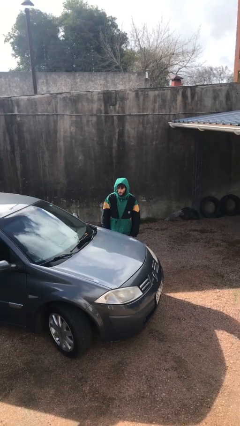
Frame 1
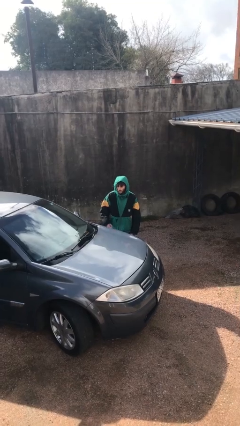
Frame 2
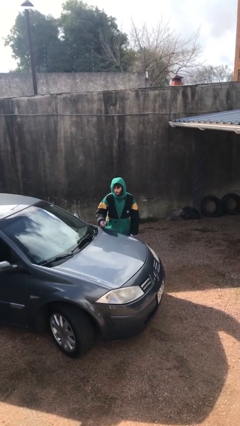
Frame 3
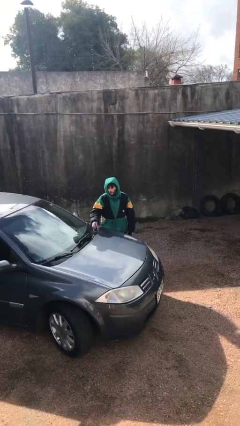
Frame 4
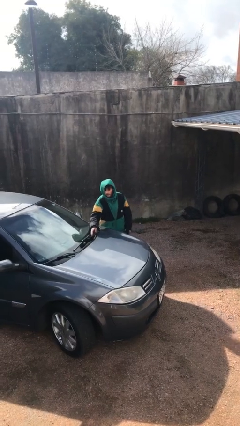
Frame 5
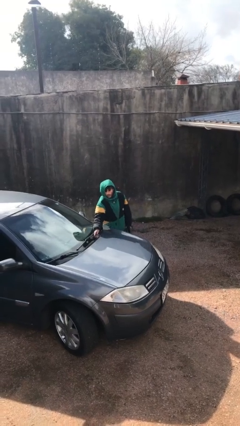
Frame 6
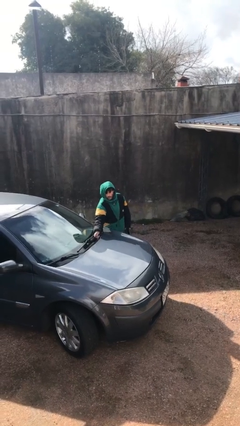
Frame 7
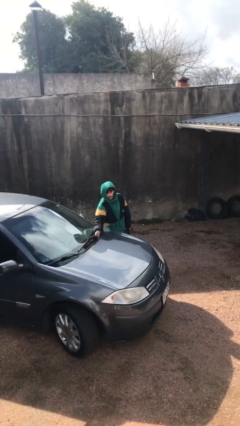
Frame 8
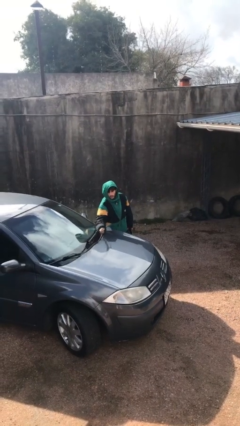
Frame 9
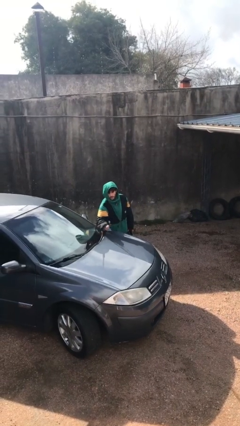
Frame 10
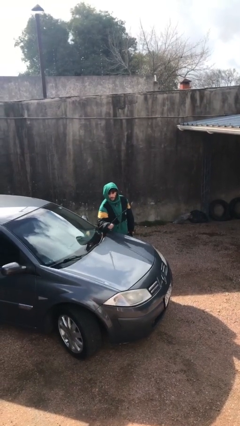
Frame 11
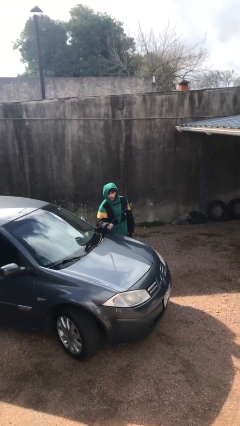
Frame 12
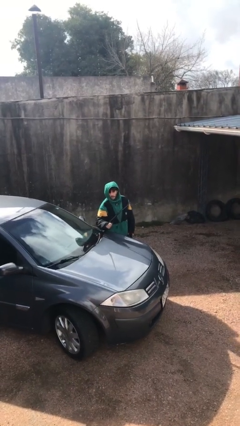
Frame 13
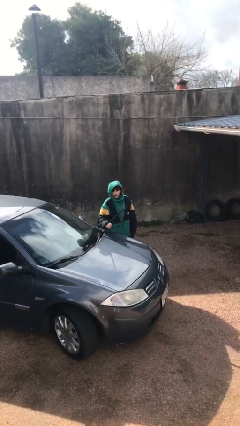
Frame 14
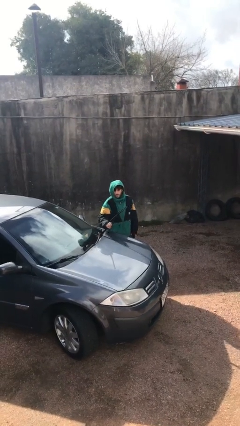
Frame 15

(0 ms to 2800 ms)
person flips up car wipers

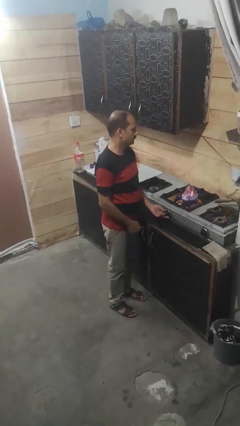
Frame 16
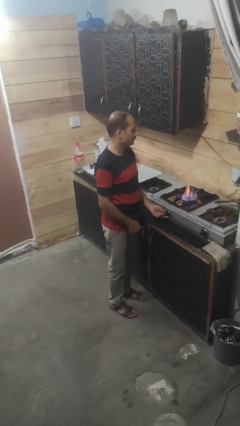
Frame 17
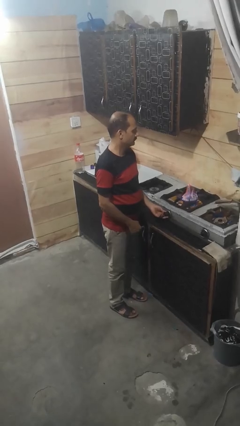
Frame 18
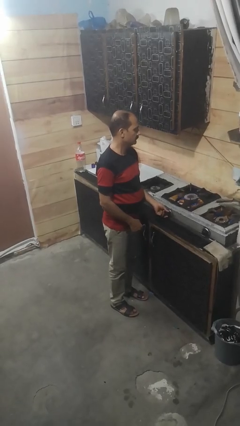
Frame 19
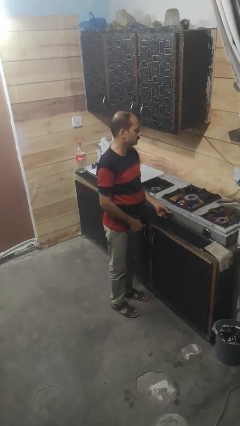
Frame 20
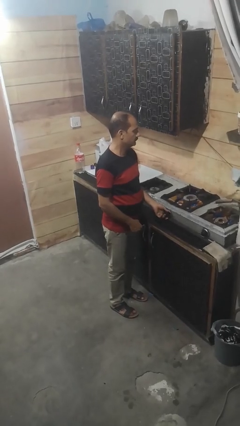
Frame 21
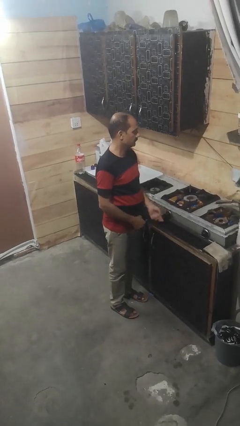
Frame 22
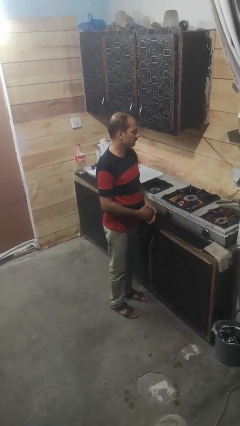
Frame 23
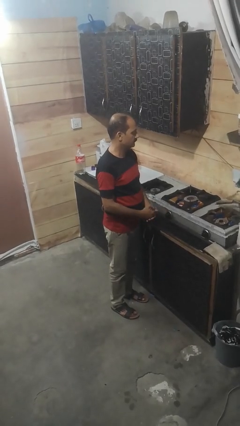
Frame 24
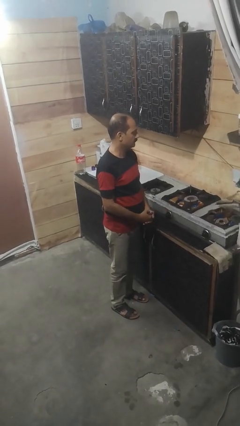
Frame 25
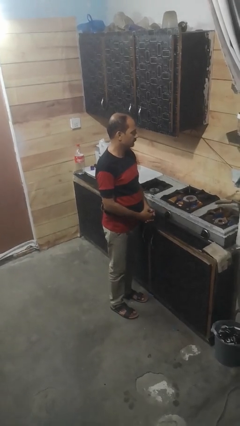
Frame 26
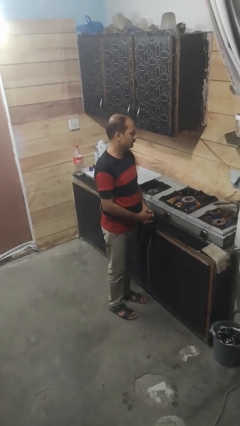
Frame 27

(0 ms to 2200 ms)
person turns off stovetop

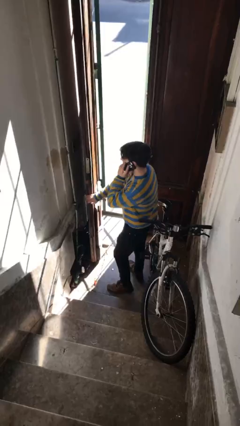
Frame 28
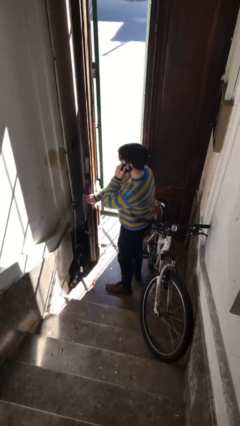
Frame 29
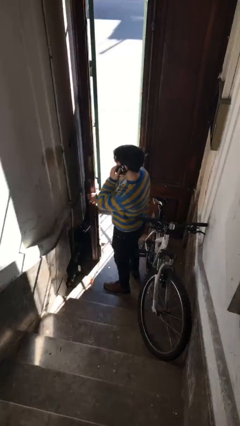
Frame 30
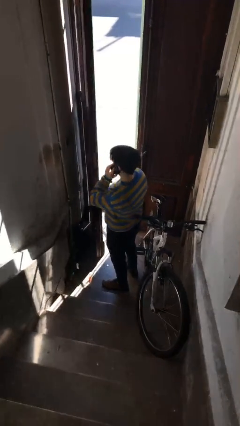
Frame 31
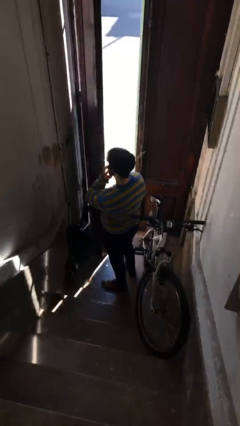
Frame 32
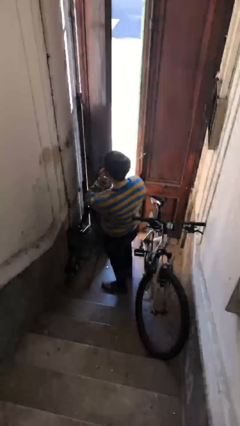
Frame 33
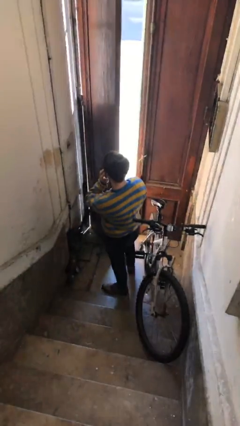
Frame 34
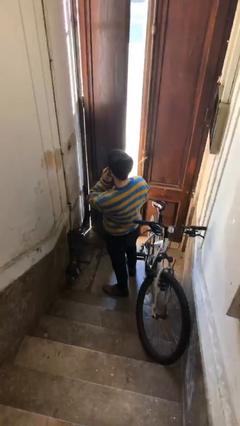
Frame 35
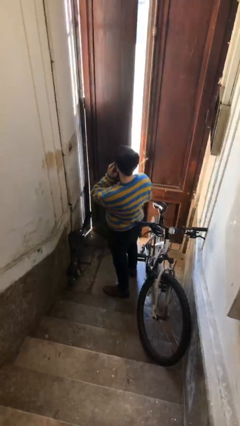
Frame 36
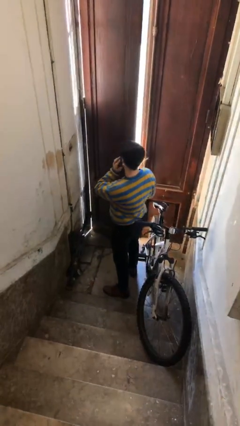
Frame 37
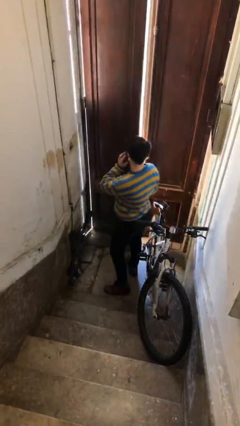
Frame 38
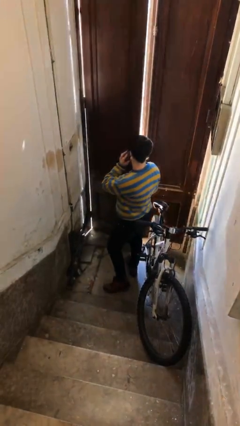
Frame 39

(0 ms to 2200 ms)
person closes facility door

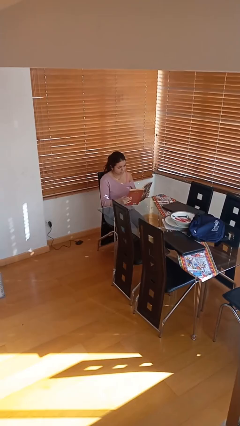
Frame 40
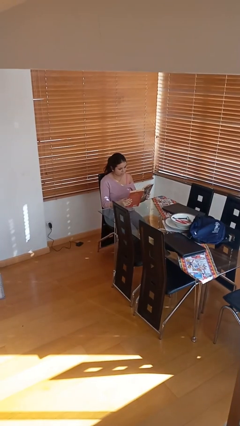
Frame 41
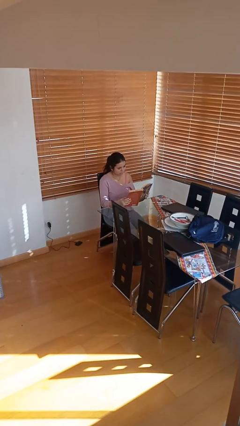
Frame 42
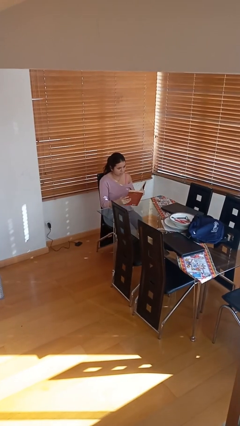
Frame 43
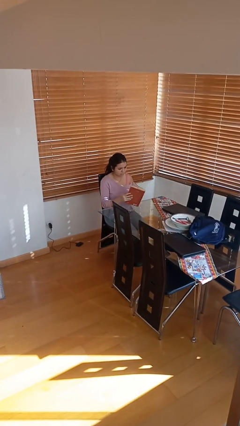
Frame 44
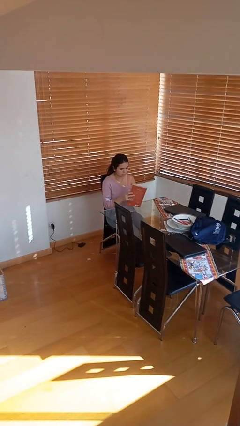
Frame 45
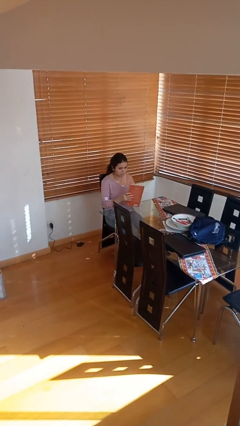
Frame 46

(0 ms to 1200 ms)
person reads document

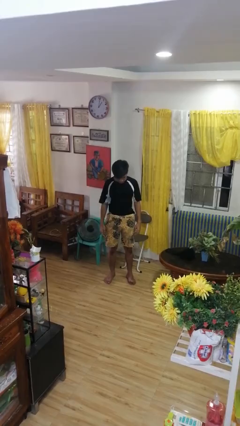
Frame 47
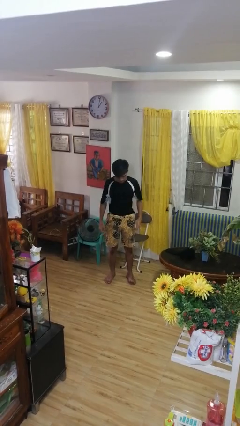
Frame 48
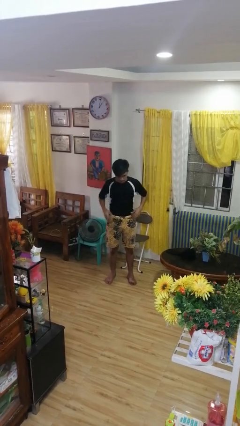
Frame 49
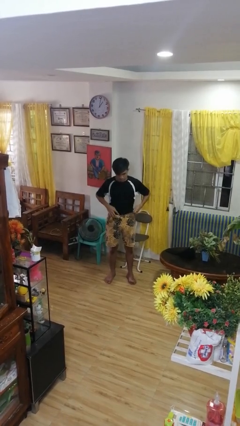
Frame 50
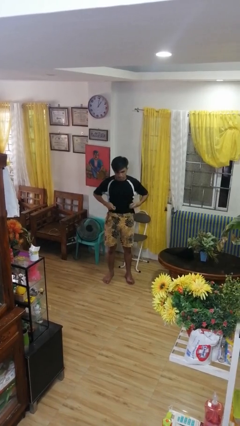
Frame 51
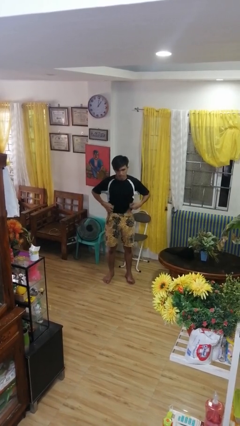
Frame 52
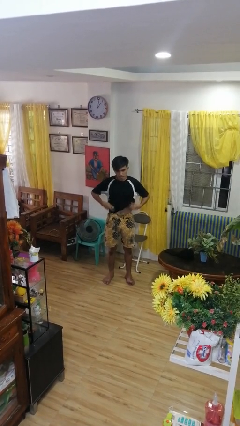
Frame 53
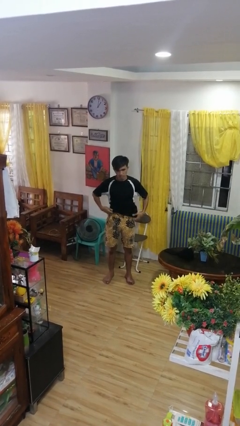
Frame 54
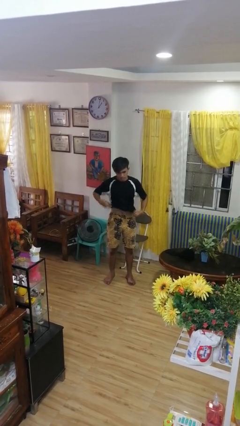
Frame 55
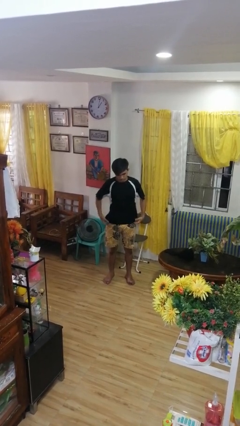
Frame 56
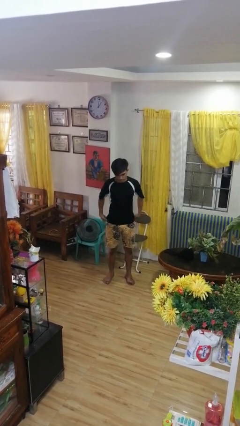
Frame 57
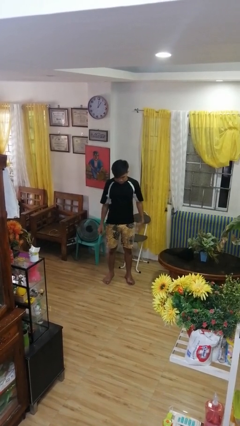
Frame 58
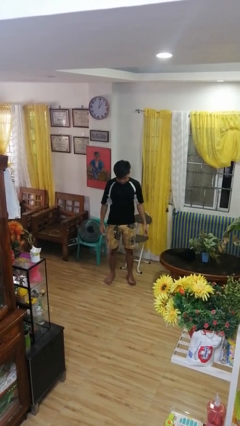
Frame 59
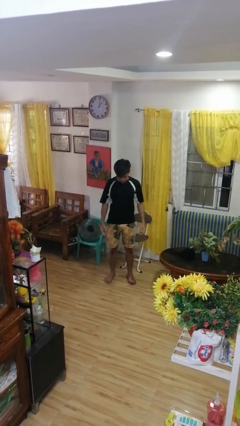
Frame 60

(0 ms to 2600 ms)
person untucks shirt

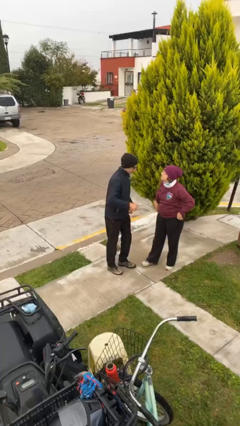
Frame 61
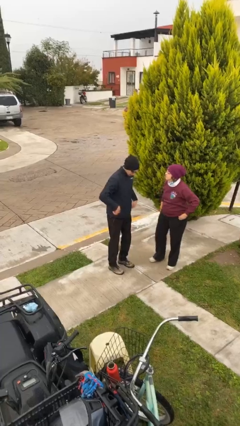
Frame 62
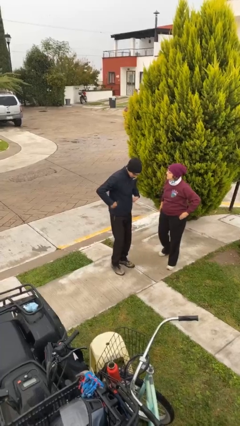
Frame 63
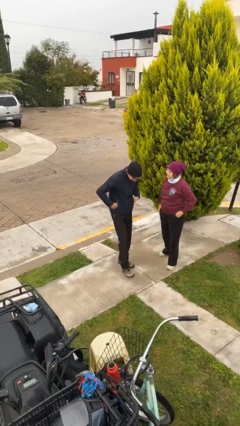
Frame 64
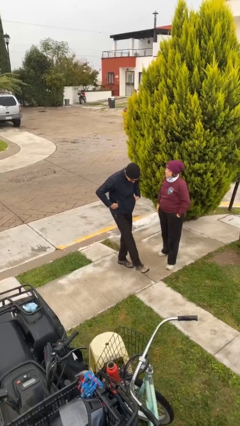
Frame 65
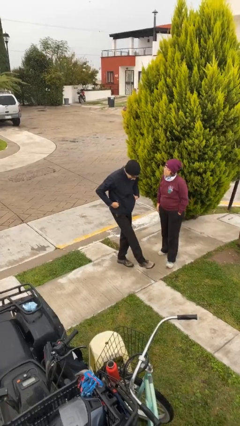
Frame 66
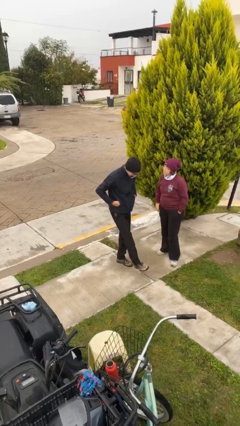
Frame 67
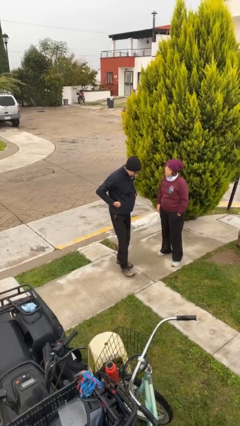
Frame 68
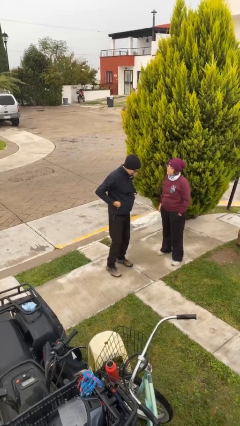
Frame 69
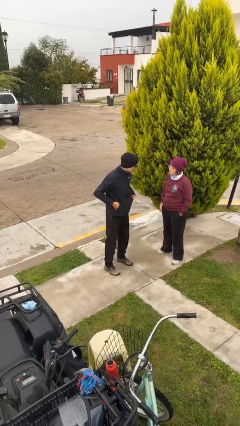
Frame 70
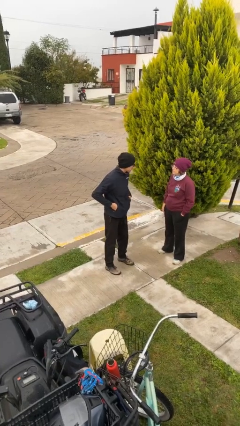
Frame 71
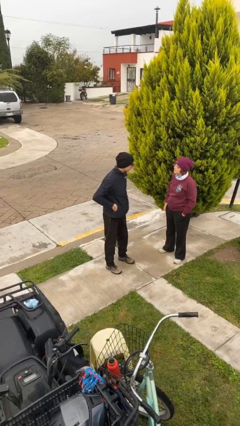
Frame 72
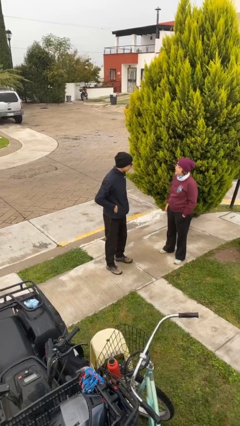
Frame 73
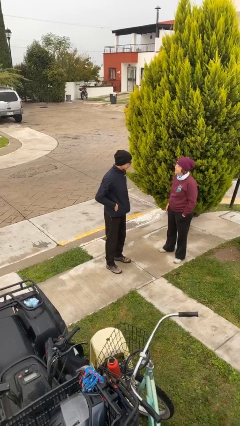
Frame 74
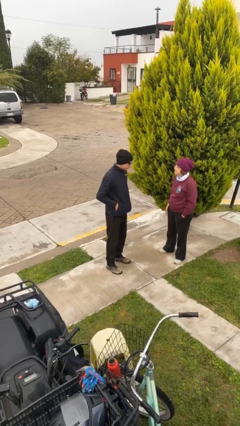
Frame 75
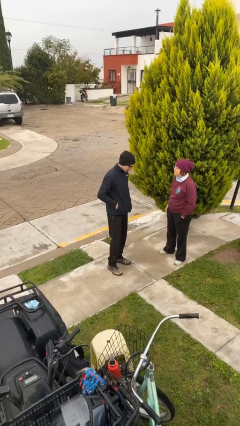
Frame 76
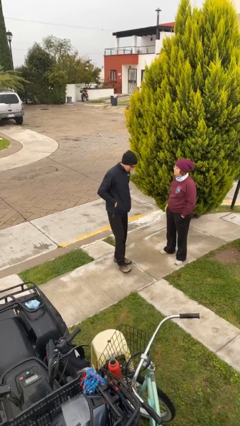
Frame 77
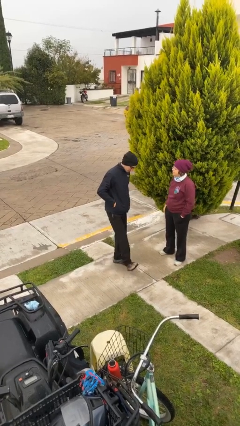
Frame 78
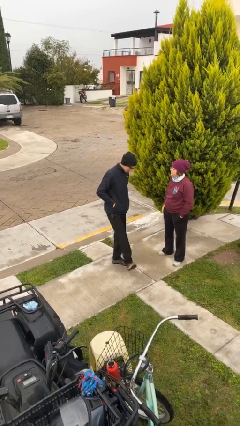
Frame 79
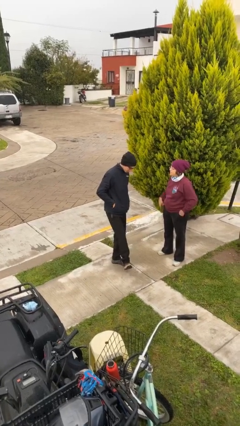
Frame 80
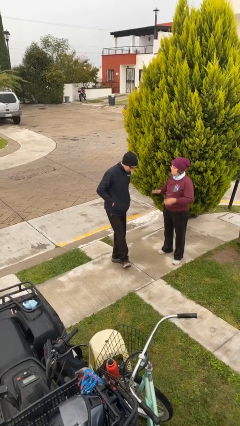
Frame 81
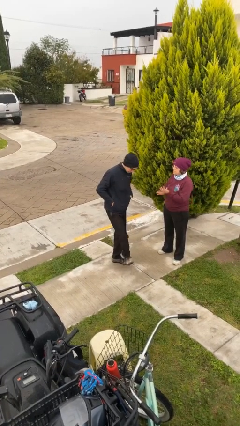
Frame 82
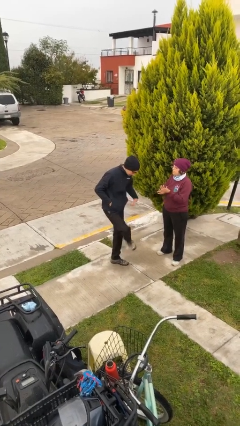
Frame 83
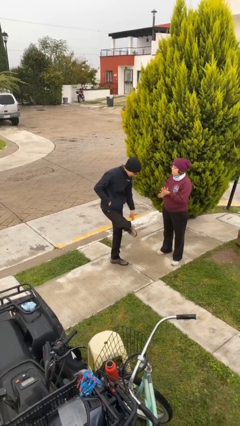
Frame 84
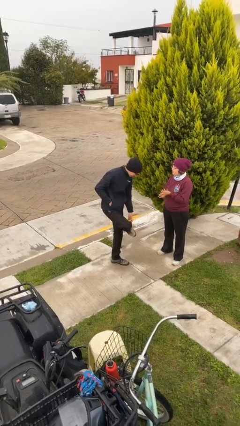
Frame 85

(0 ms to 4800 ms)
person talks to person

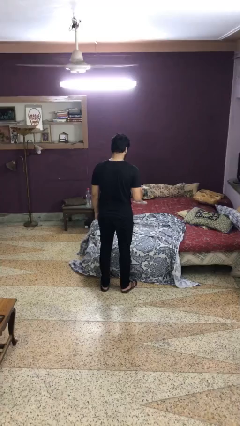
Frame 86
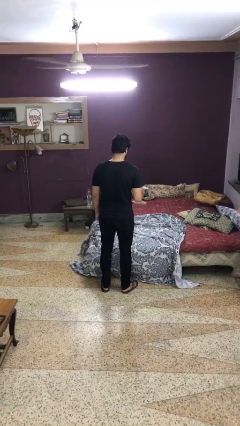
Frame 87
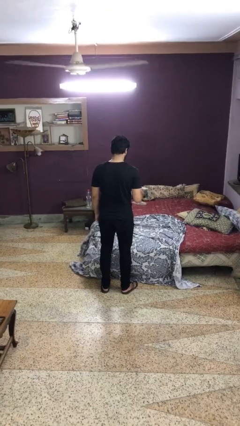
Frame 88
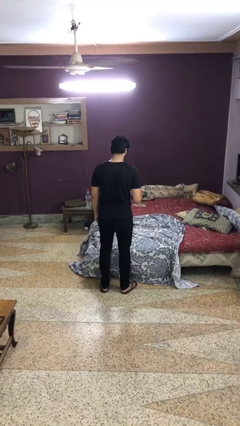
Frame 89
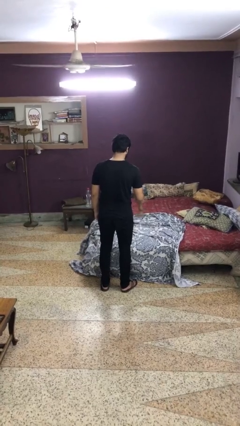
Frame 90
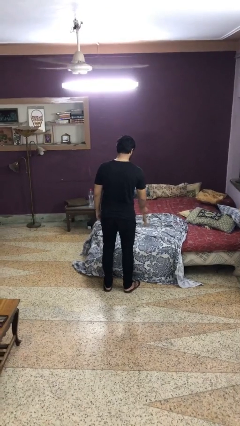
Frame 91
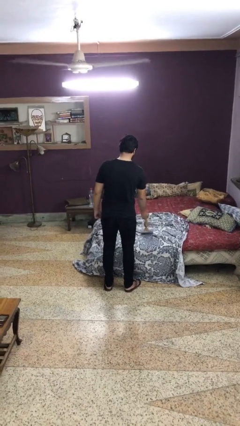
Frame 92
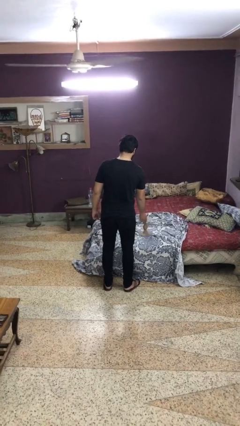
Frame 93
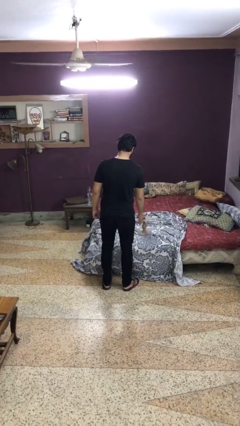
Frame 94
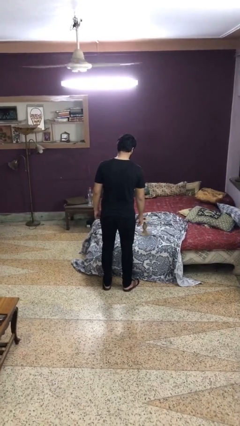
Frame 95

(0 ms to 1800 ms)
person puts down object on bed
